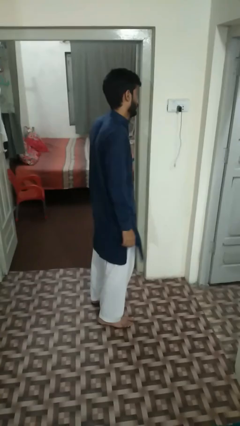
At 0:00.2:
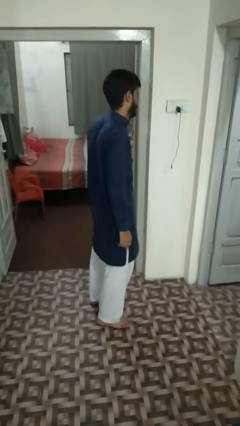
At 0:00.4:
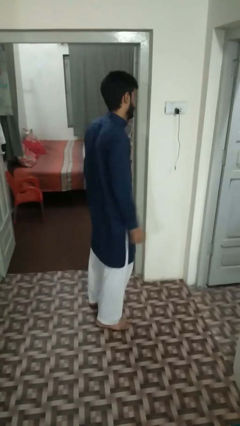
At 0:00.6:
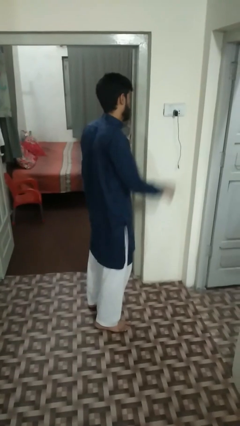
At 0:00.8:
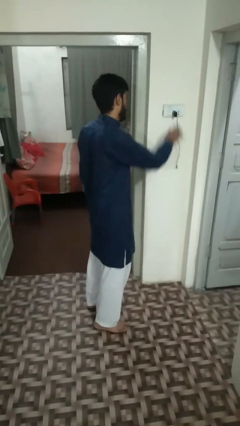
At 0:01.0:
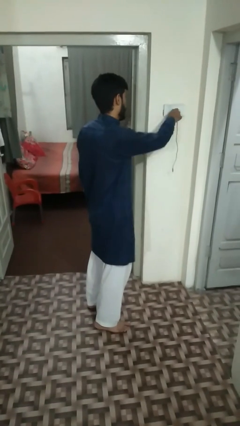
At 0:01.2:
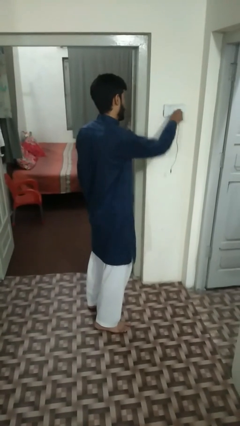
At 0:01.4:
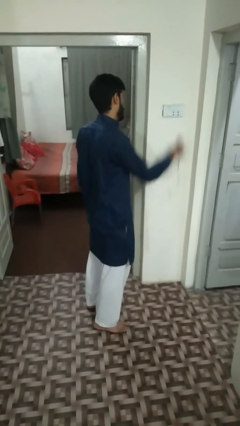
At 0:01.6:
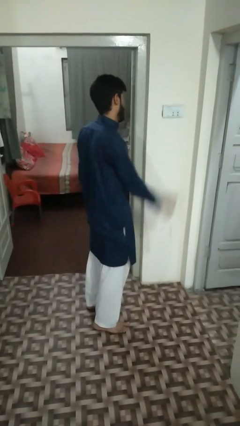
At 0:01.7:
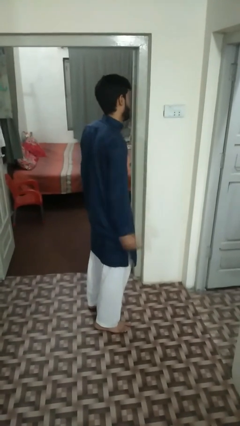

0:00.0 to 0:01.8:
person unplugs from electrical socket

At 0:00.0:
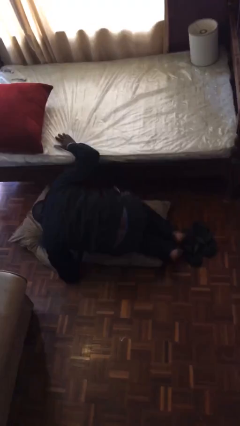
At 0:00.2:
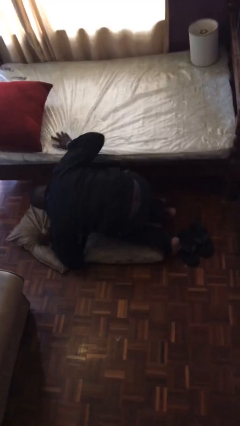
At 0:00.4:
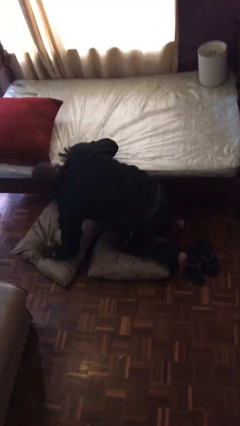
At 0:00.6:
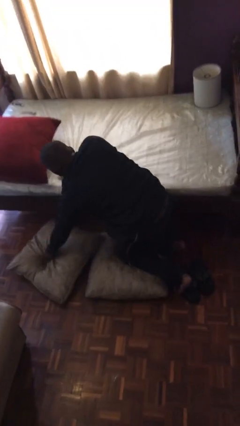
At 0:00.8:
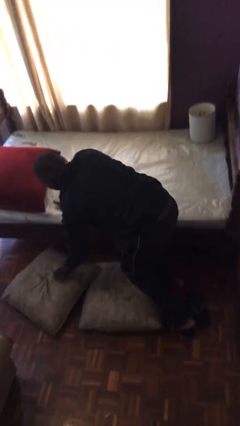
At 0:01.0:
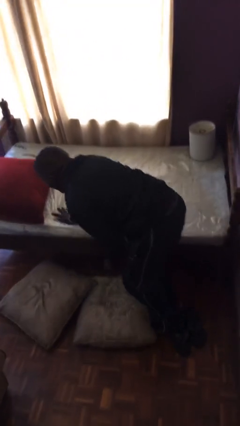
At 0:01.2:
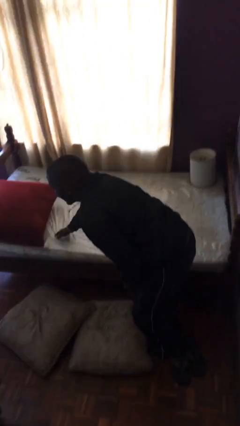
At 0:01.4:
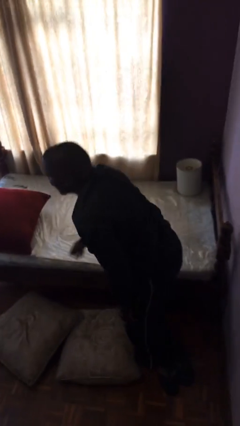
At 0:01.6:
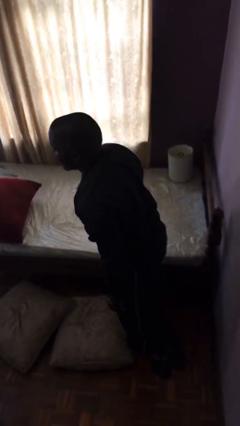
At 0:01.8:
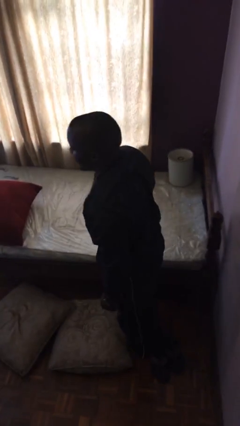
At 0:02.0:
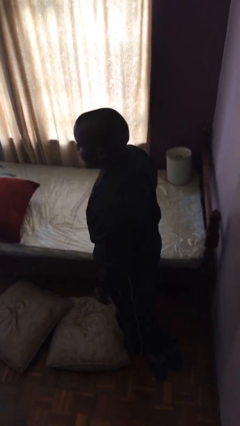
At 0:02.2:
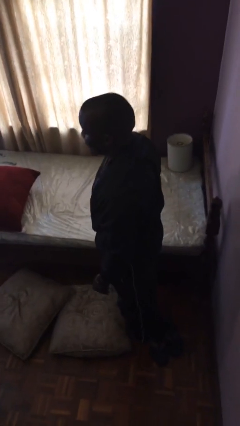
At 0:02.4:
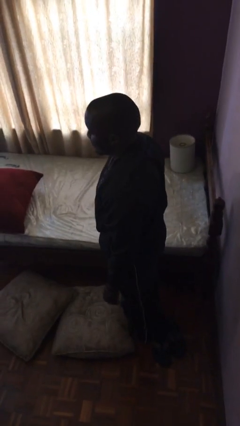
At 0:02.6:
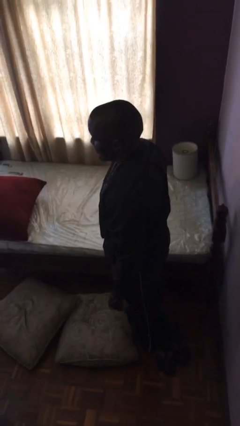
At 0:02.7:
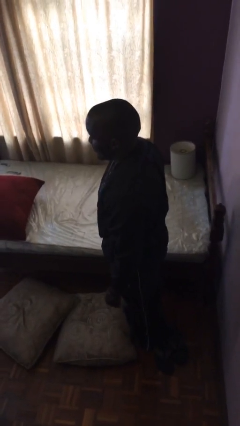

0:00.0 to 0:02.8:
person stands up from floor

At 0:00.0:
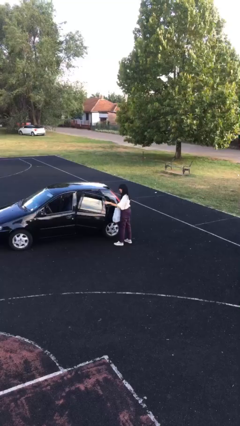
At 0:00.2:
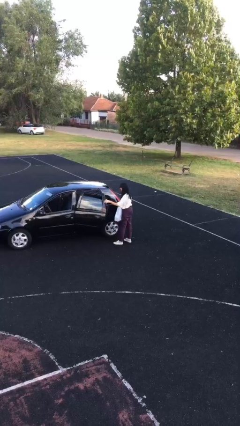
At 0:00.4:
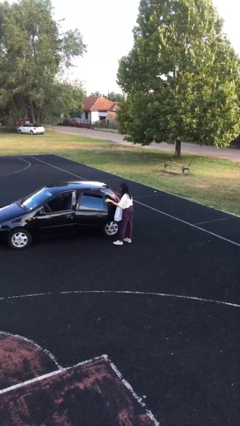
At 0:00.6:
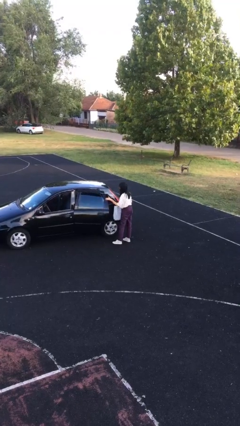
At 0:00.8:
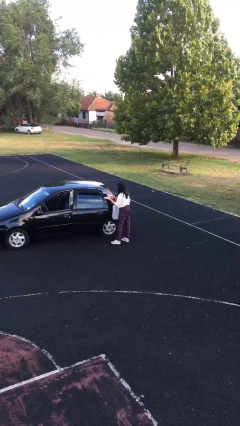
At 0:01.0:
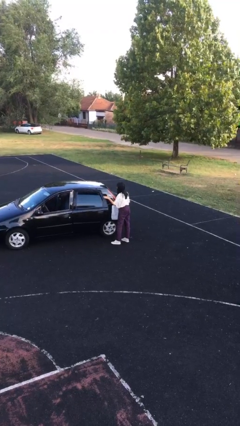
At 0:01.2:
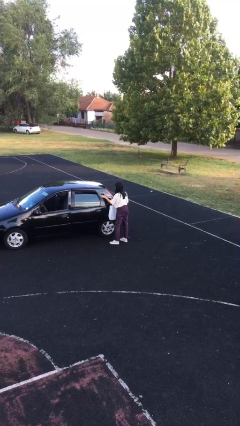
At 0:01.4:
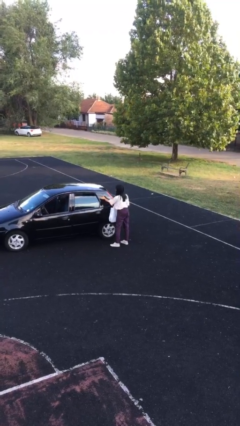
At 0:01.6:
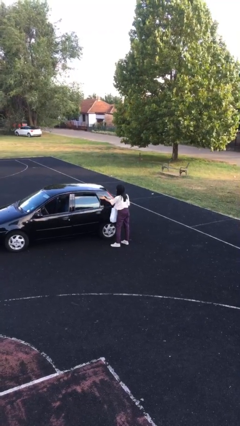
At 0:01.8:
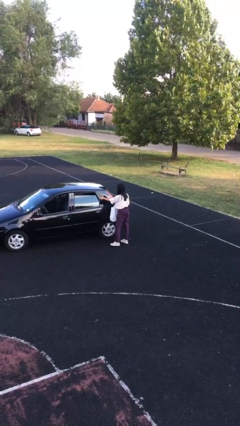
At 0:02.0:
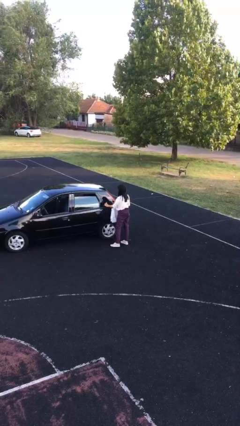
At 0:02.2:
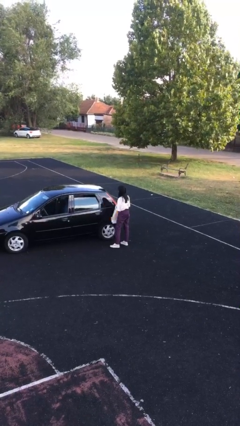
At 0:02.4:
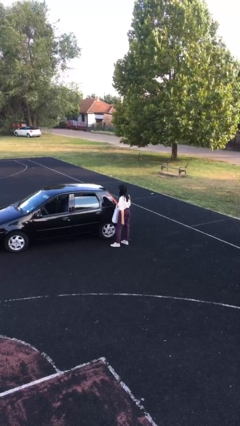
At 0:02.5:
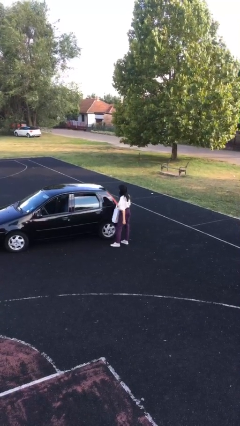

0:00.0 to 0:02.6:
person closes car door

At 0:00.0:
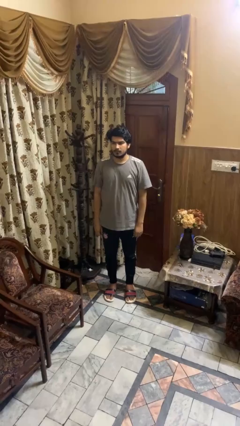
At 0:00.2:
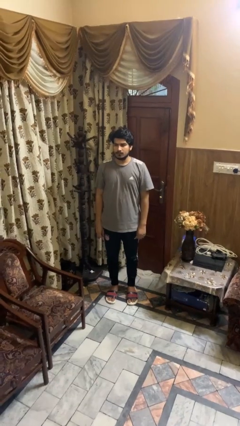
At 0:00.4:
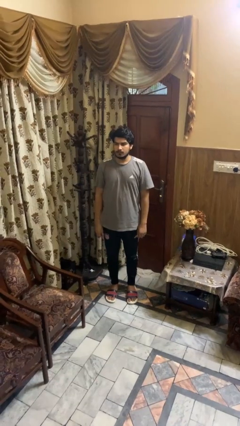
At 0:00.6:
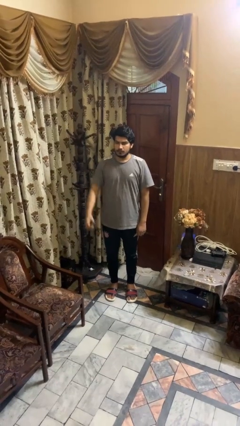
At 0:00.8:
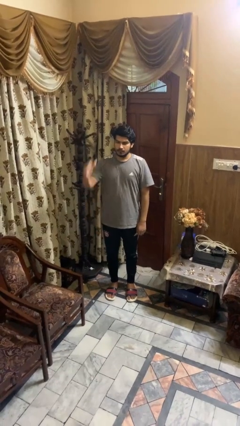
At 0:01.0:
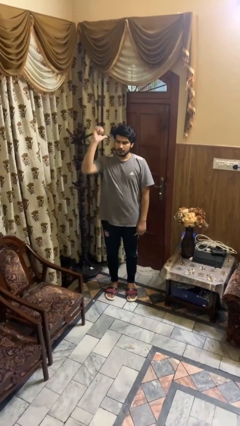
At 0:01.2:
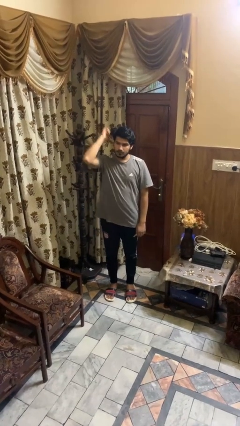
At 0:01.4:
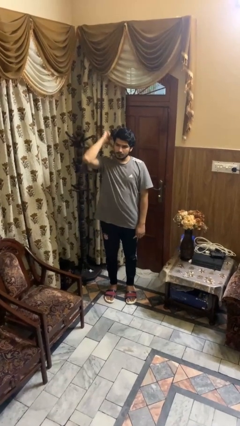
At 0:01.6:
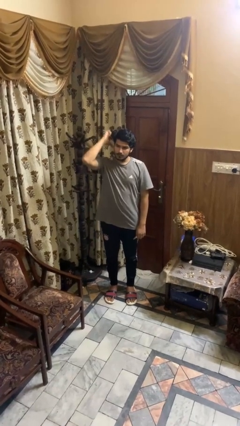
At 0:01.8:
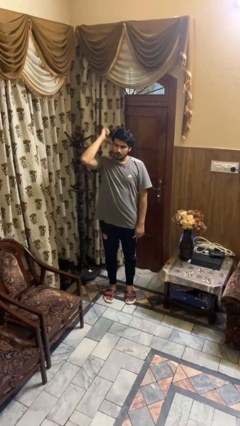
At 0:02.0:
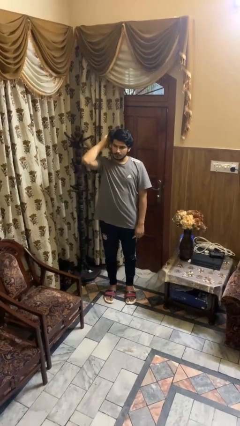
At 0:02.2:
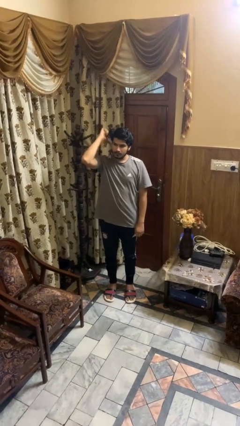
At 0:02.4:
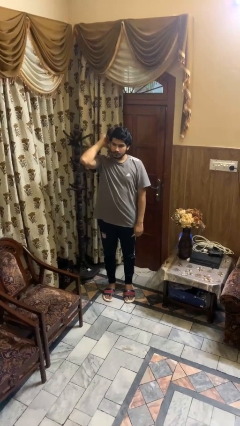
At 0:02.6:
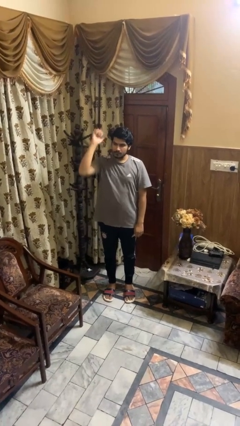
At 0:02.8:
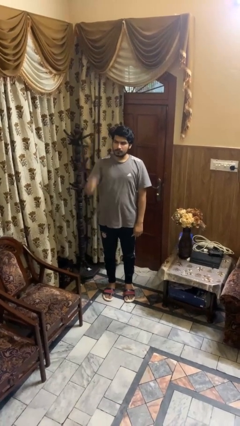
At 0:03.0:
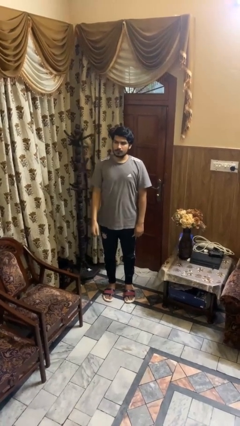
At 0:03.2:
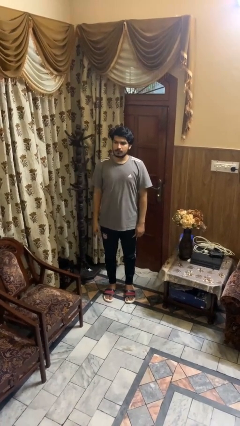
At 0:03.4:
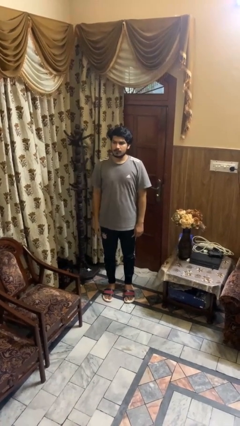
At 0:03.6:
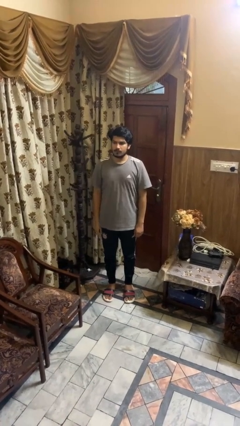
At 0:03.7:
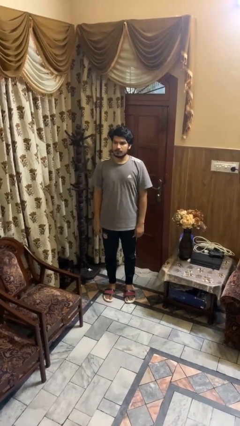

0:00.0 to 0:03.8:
person gestures behind me

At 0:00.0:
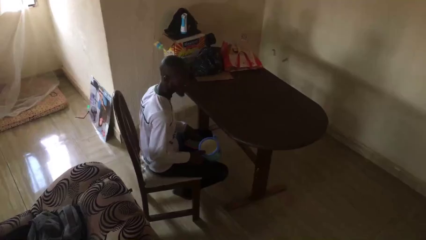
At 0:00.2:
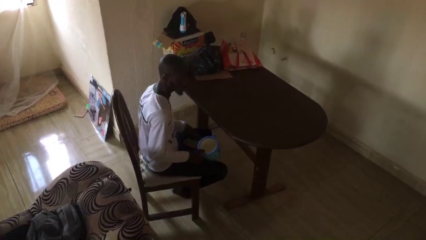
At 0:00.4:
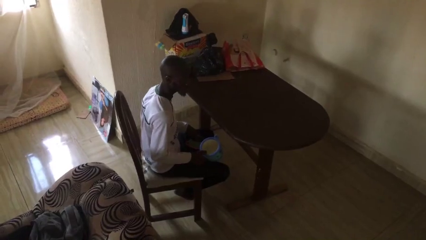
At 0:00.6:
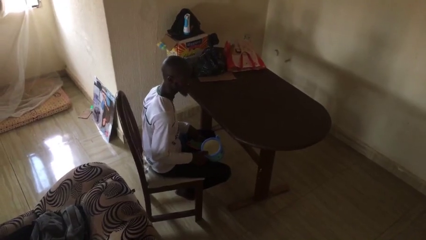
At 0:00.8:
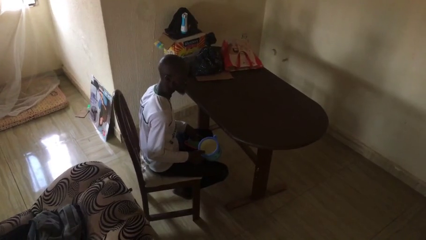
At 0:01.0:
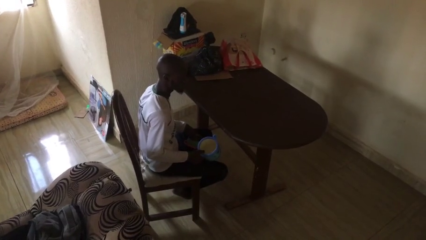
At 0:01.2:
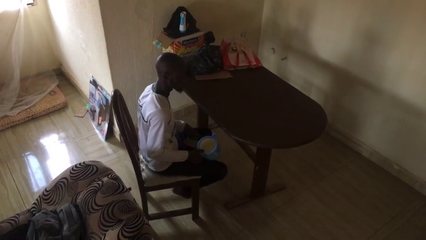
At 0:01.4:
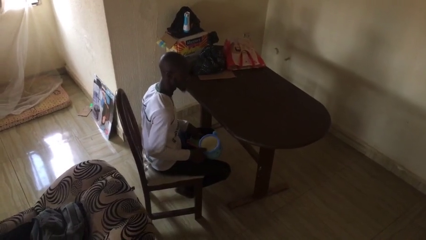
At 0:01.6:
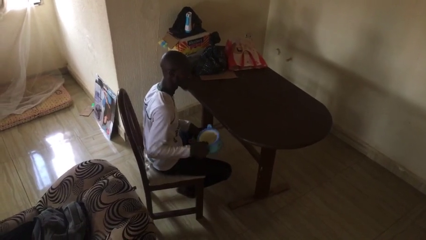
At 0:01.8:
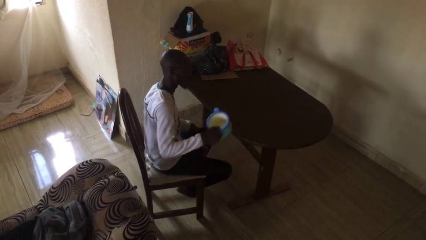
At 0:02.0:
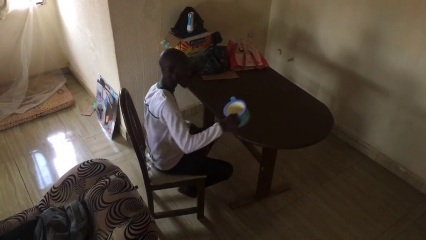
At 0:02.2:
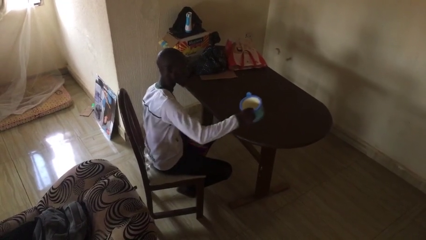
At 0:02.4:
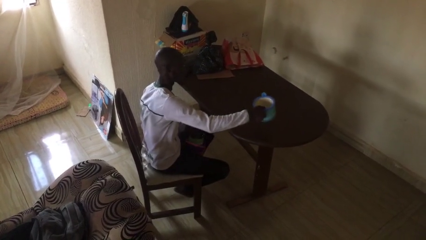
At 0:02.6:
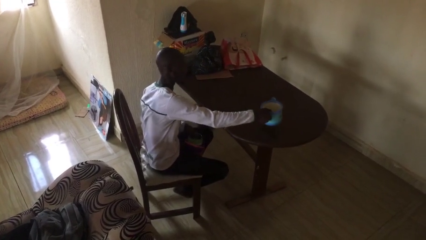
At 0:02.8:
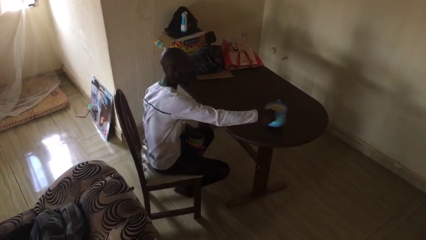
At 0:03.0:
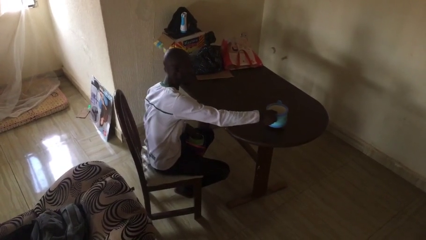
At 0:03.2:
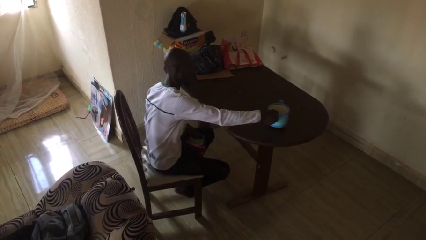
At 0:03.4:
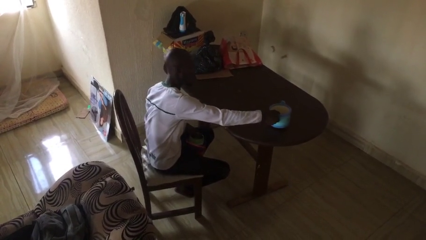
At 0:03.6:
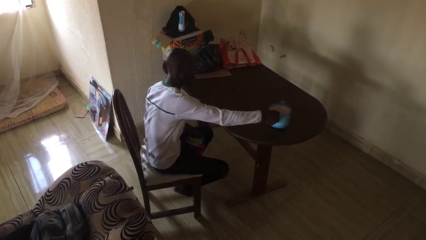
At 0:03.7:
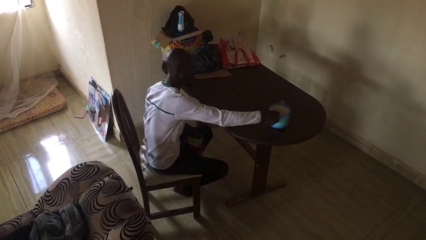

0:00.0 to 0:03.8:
person sets table

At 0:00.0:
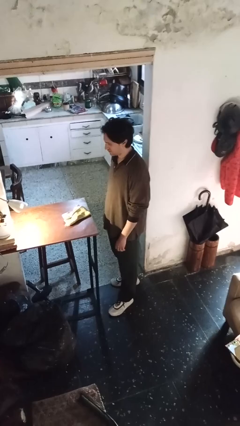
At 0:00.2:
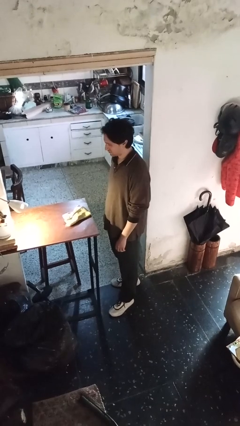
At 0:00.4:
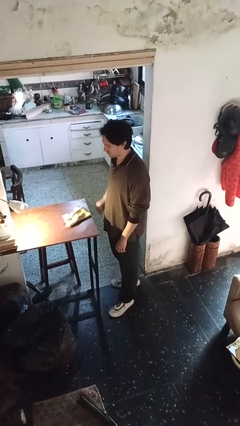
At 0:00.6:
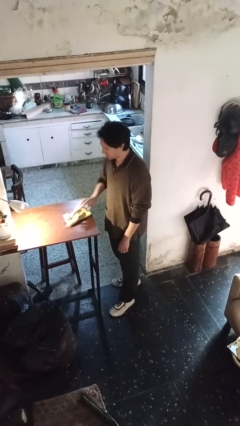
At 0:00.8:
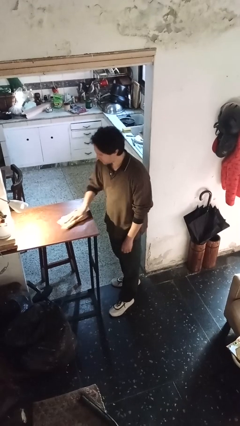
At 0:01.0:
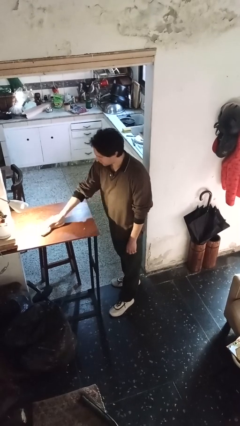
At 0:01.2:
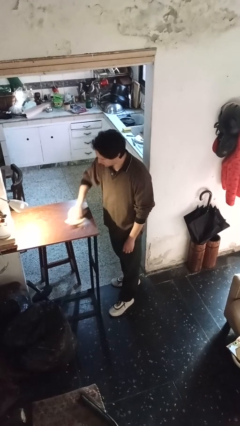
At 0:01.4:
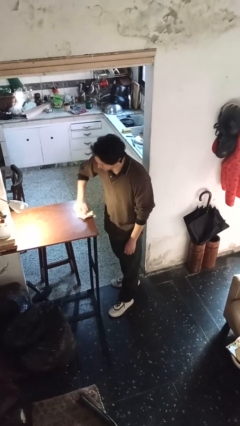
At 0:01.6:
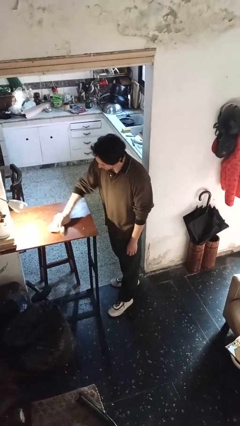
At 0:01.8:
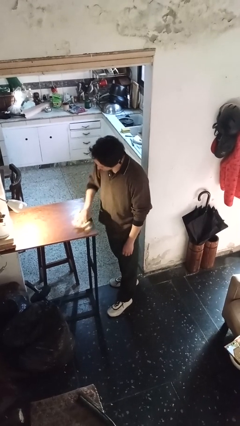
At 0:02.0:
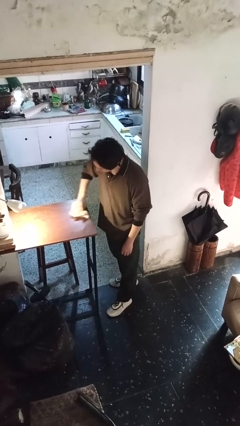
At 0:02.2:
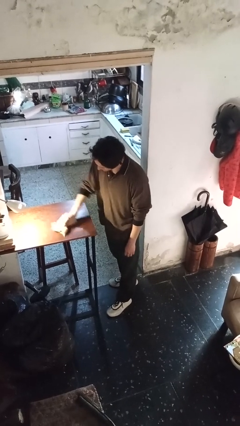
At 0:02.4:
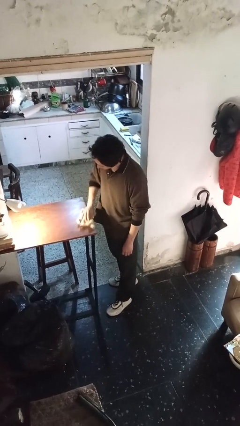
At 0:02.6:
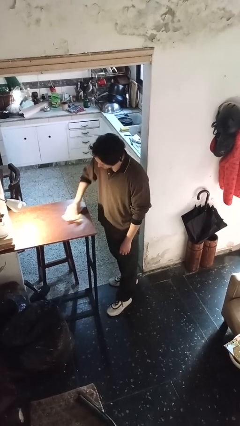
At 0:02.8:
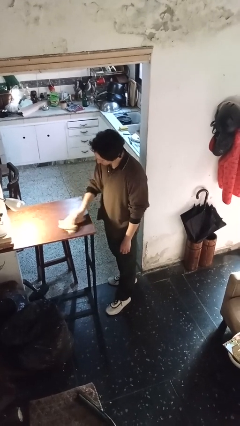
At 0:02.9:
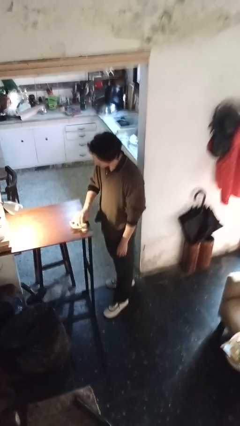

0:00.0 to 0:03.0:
person cleans table with rag

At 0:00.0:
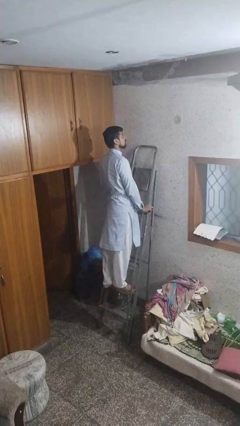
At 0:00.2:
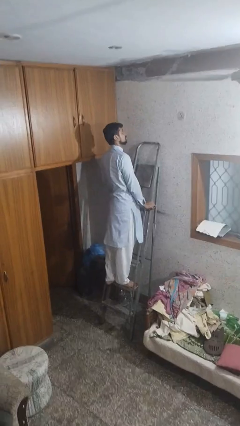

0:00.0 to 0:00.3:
person climbs down ladder
